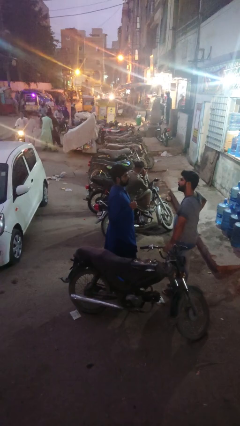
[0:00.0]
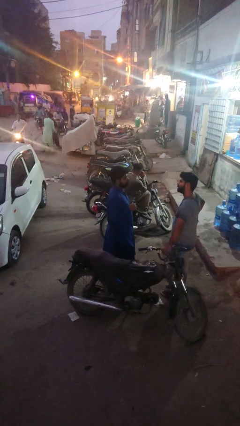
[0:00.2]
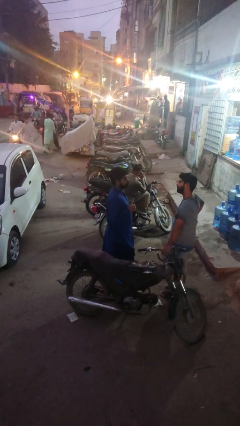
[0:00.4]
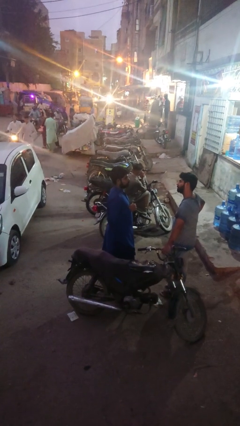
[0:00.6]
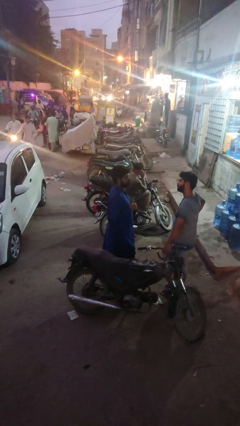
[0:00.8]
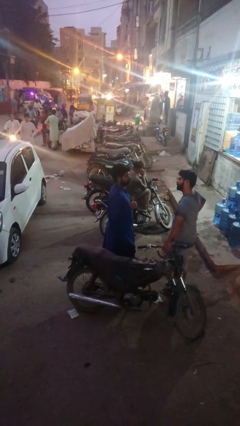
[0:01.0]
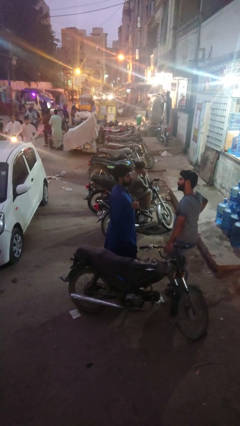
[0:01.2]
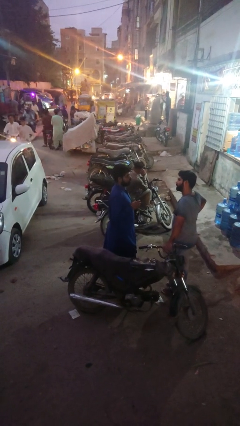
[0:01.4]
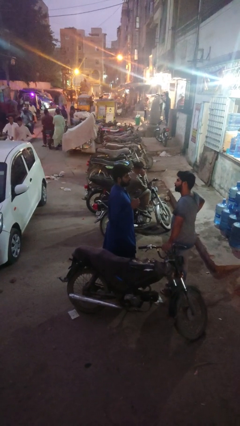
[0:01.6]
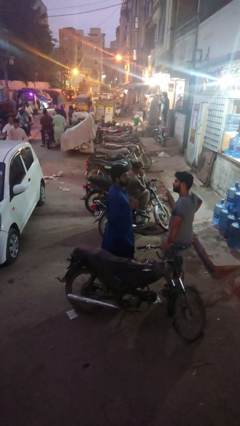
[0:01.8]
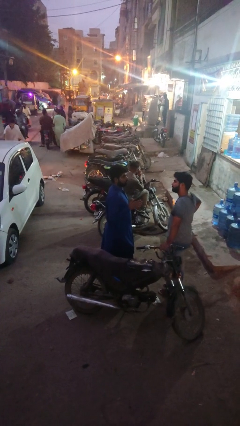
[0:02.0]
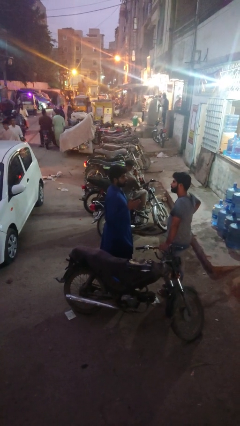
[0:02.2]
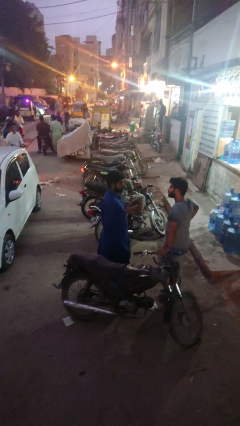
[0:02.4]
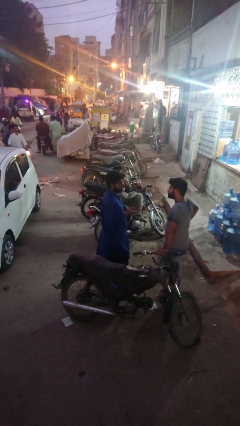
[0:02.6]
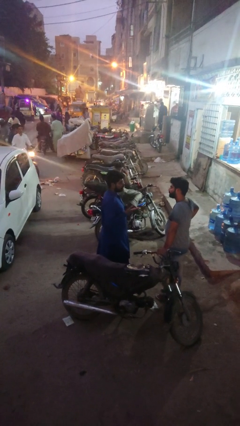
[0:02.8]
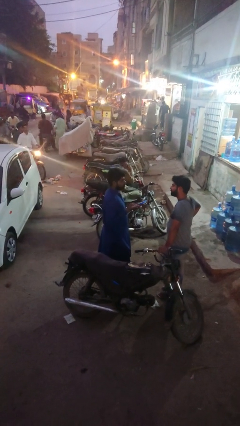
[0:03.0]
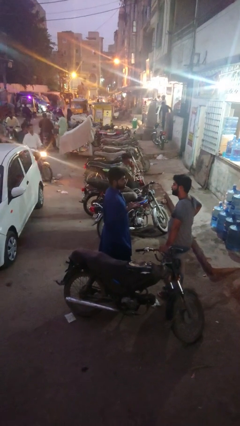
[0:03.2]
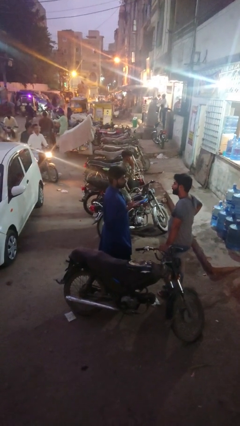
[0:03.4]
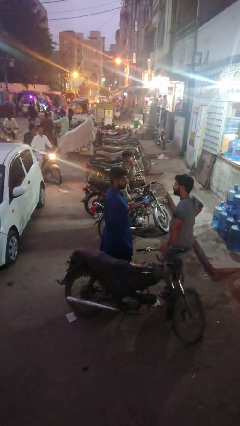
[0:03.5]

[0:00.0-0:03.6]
person talks to person

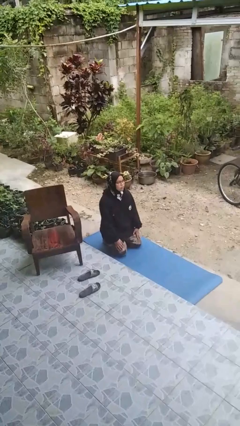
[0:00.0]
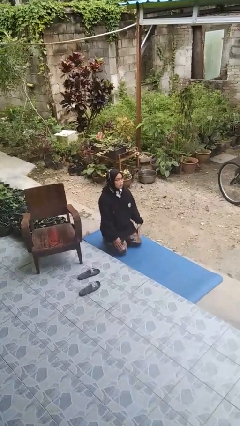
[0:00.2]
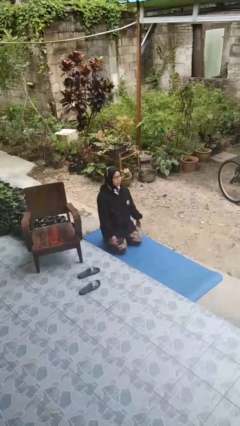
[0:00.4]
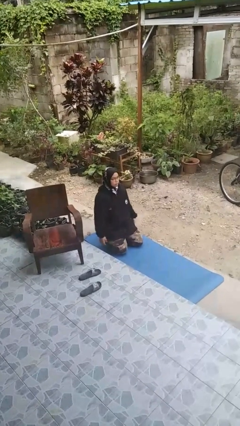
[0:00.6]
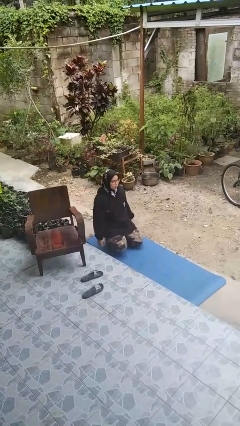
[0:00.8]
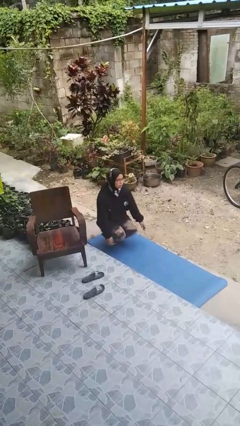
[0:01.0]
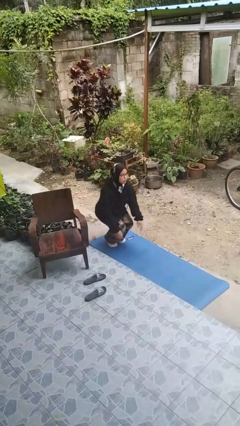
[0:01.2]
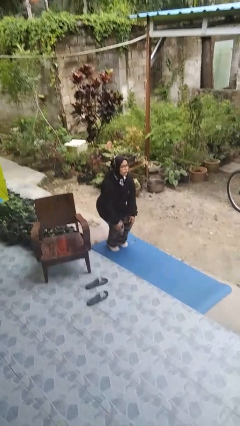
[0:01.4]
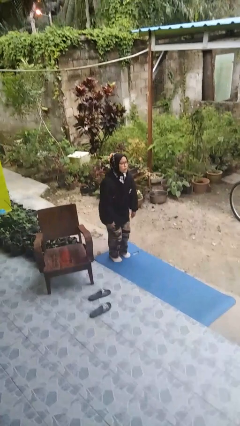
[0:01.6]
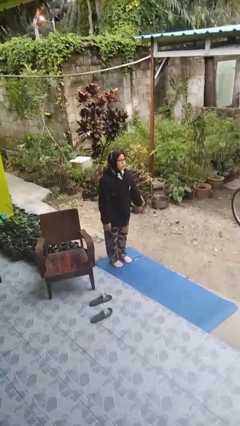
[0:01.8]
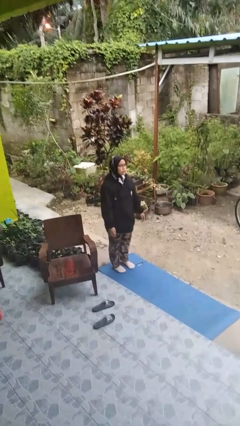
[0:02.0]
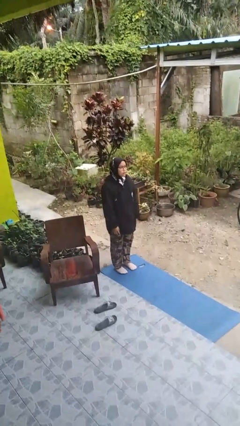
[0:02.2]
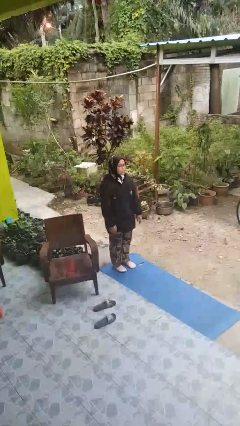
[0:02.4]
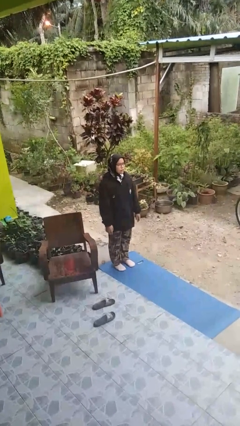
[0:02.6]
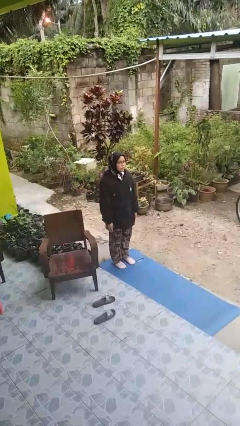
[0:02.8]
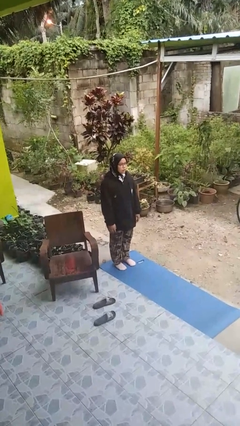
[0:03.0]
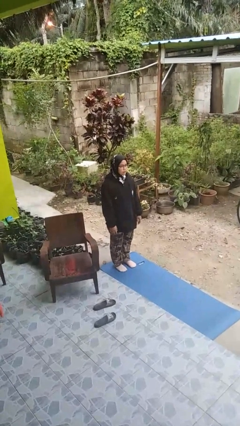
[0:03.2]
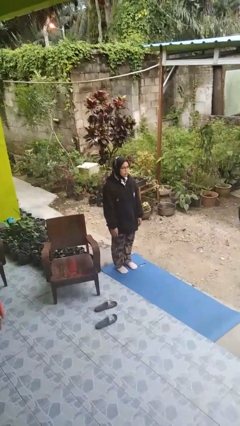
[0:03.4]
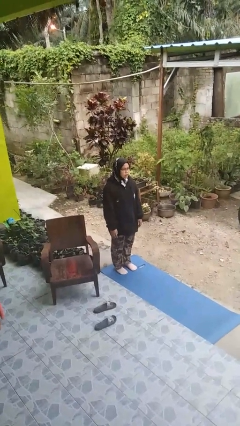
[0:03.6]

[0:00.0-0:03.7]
person stands up from floor

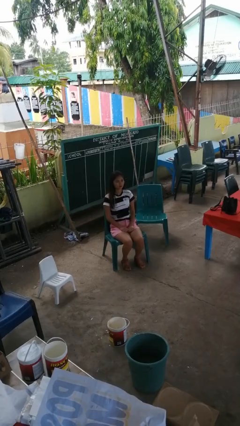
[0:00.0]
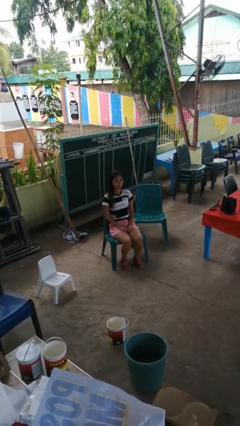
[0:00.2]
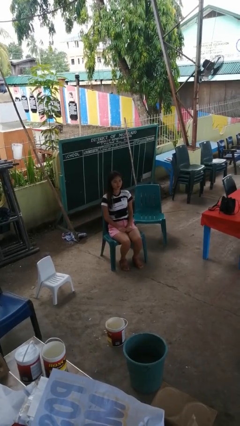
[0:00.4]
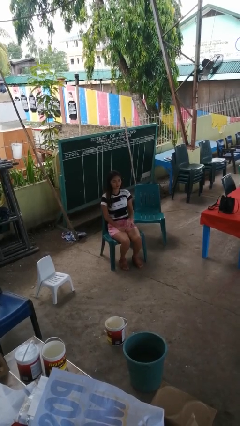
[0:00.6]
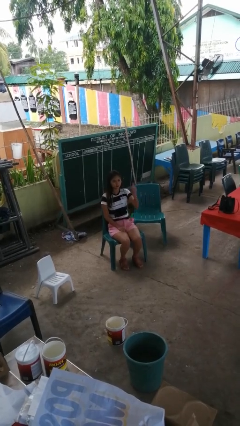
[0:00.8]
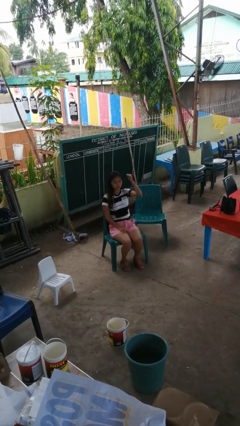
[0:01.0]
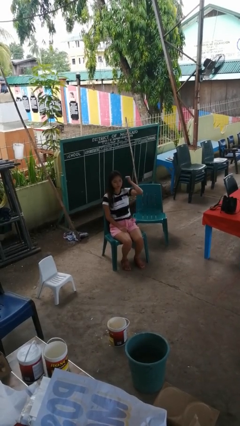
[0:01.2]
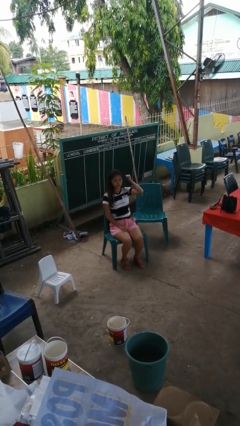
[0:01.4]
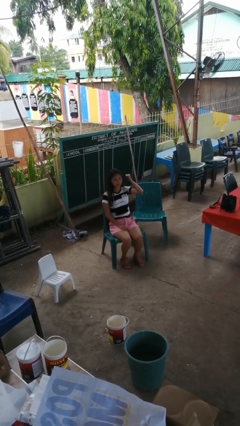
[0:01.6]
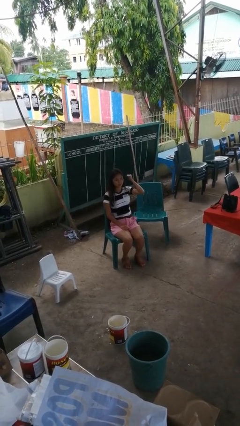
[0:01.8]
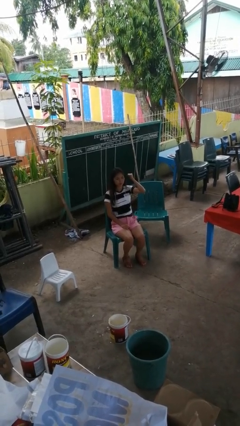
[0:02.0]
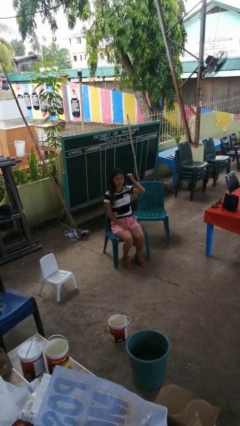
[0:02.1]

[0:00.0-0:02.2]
person gestures behind me

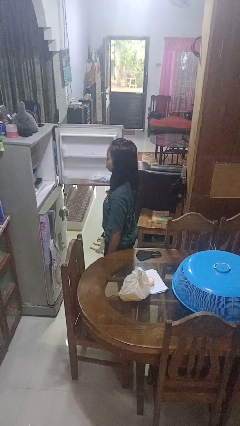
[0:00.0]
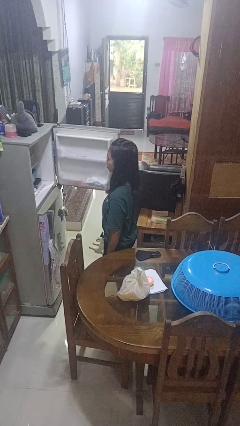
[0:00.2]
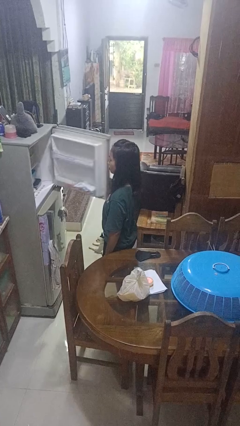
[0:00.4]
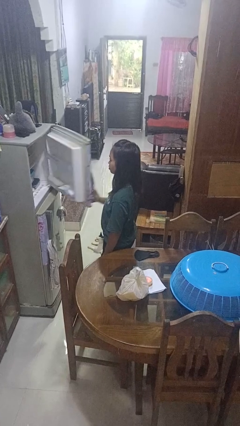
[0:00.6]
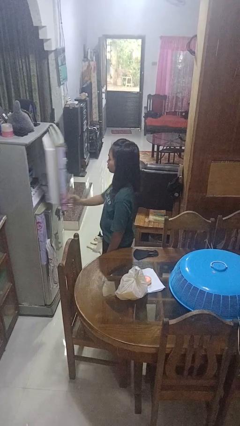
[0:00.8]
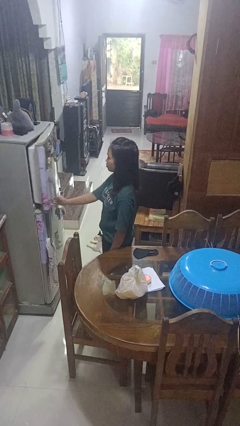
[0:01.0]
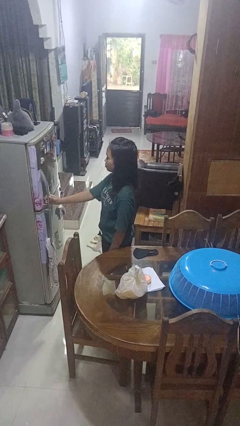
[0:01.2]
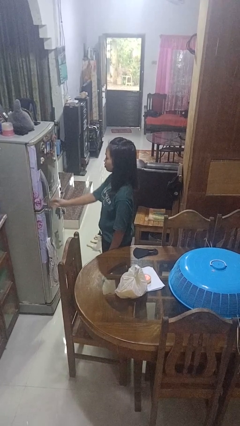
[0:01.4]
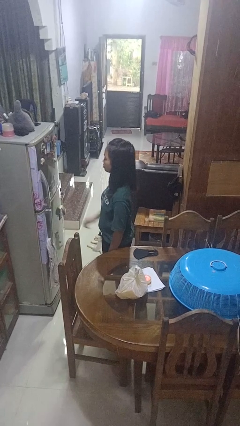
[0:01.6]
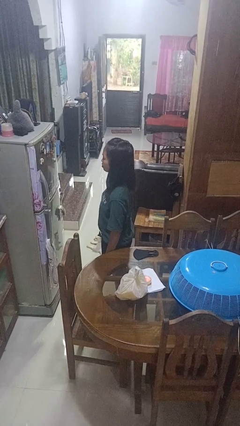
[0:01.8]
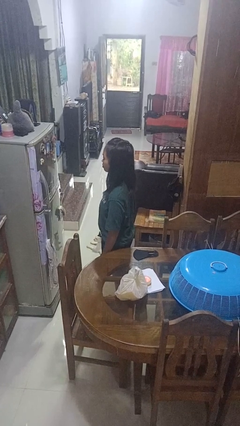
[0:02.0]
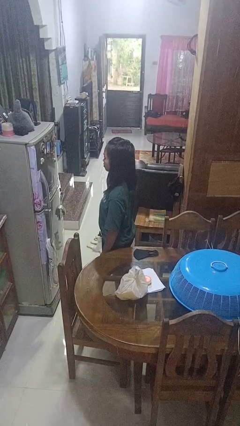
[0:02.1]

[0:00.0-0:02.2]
person closes refrigerator

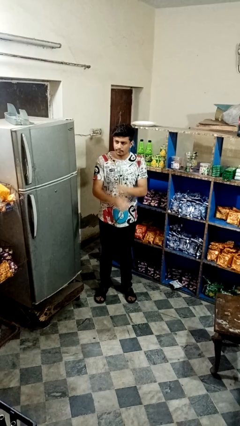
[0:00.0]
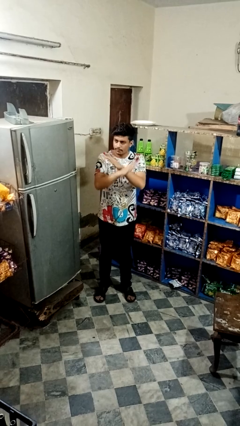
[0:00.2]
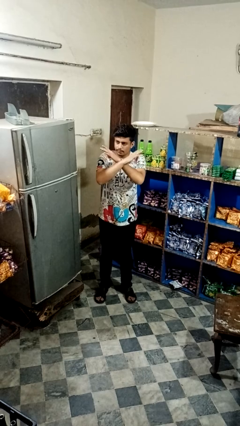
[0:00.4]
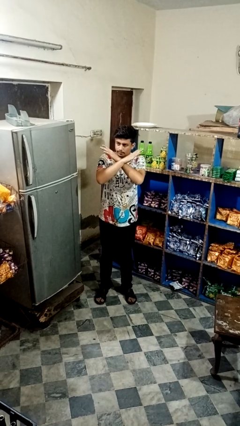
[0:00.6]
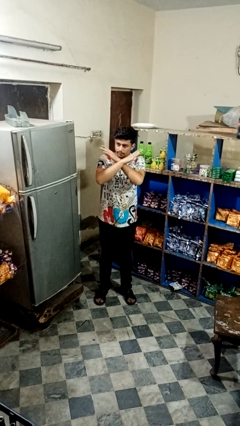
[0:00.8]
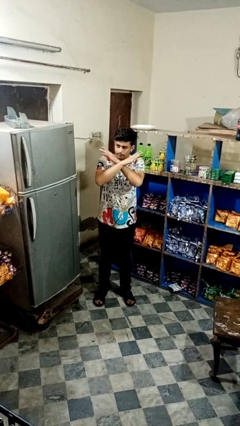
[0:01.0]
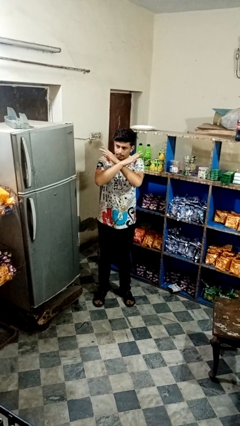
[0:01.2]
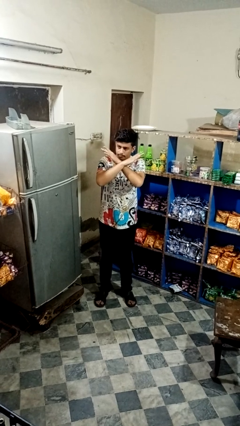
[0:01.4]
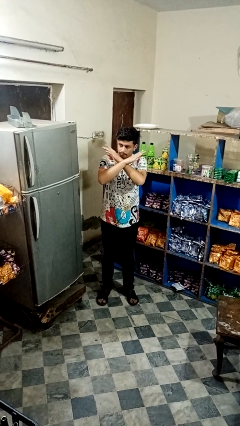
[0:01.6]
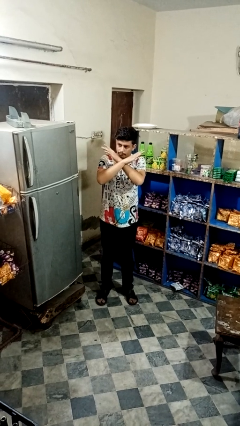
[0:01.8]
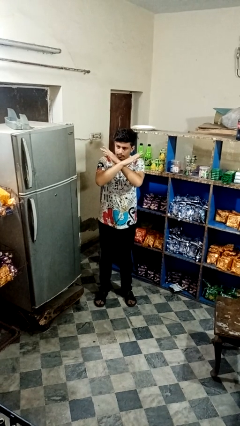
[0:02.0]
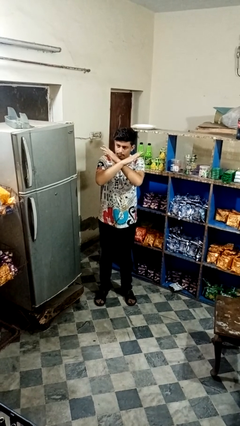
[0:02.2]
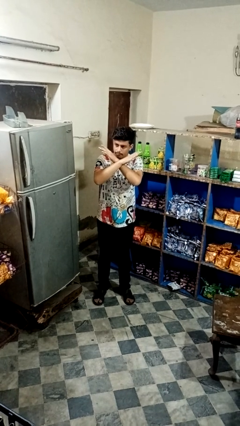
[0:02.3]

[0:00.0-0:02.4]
person gestures arms x

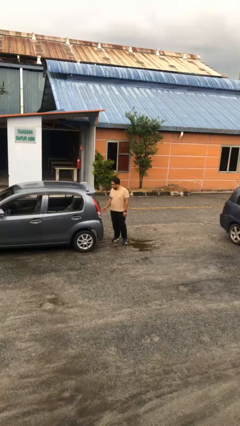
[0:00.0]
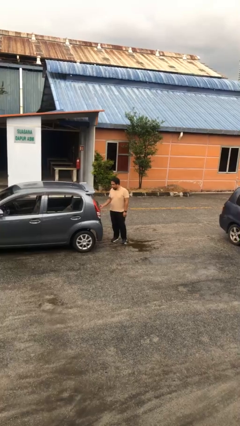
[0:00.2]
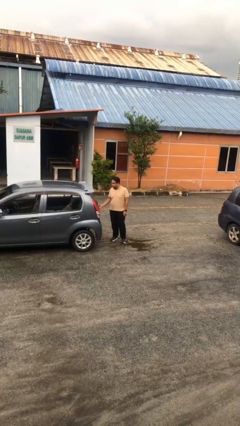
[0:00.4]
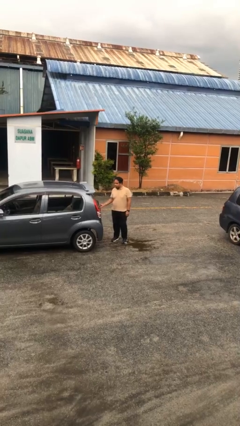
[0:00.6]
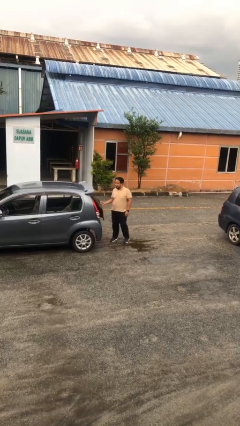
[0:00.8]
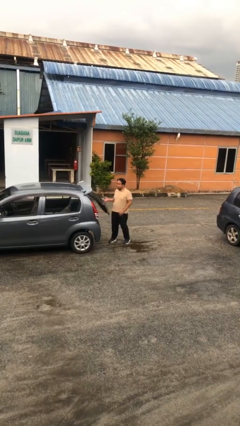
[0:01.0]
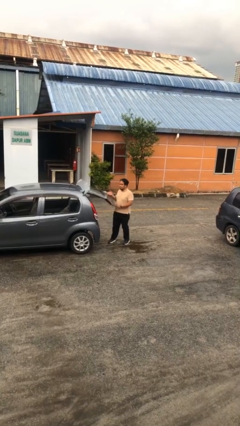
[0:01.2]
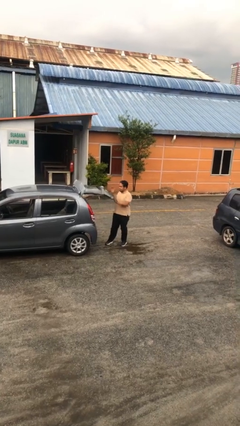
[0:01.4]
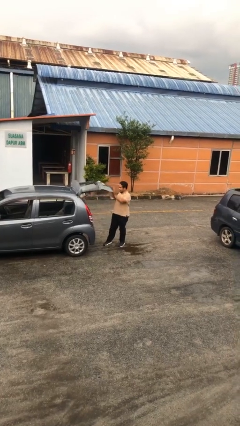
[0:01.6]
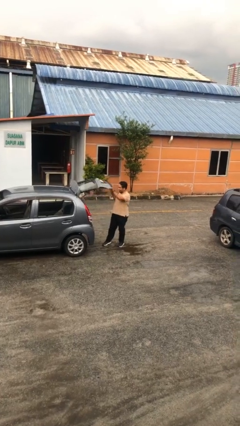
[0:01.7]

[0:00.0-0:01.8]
person opens car trunk

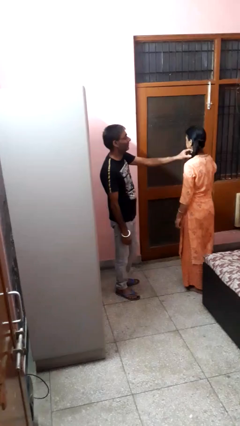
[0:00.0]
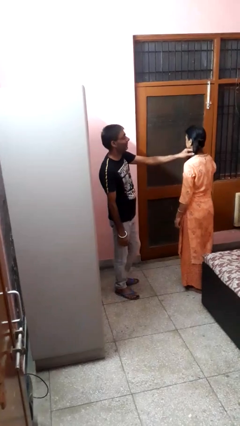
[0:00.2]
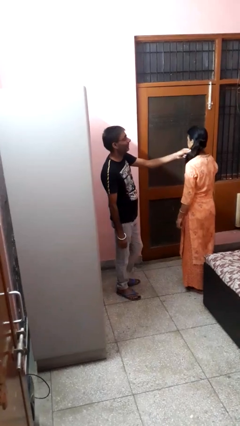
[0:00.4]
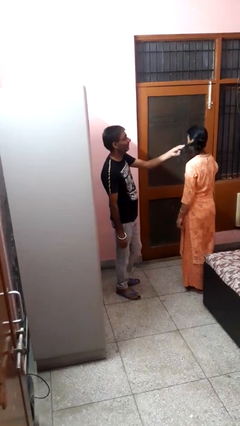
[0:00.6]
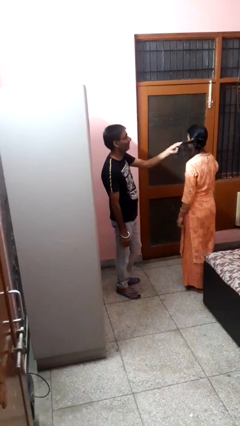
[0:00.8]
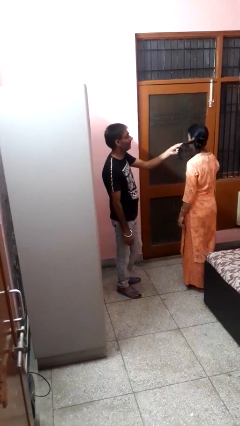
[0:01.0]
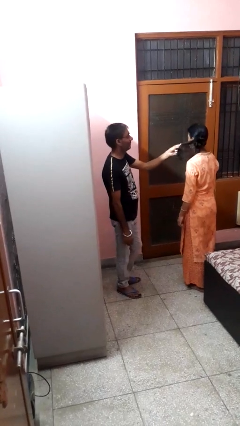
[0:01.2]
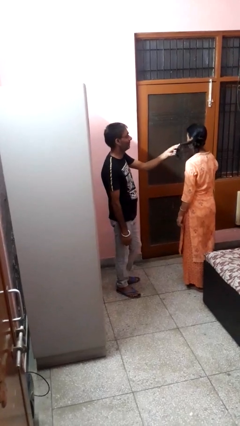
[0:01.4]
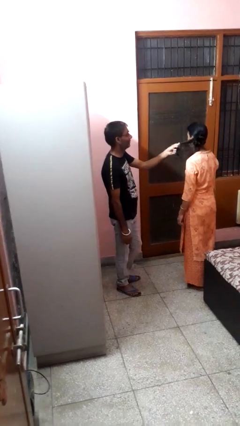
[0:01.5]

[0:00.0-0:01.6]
person grabs person by hair
